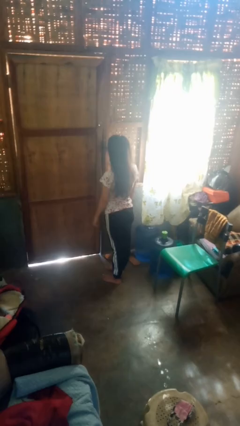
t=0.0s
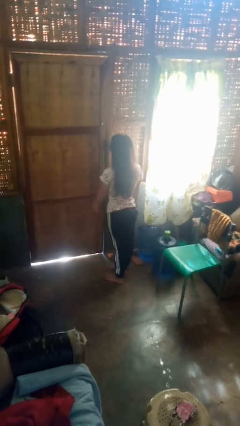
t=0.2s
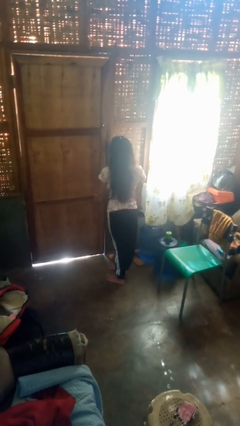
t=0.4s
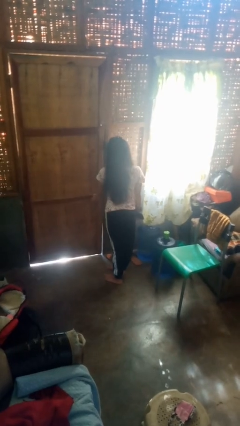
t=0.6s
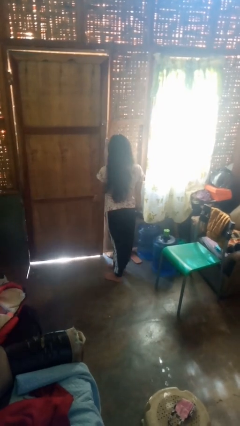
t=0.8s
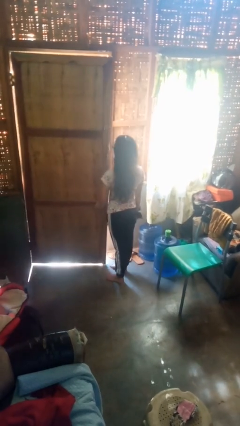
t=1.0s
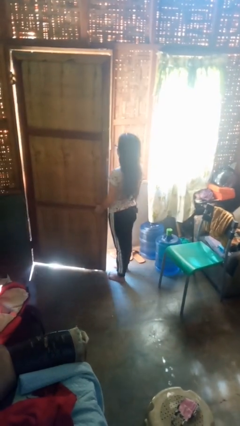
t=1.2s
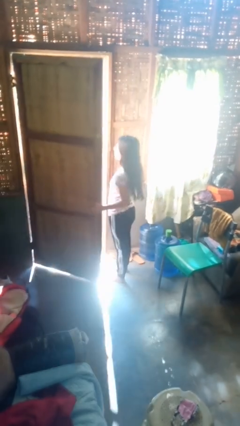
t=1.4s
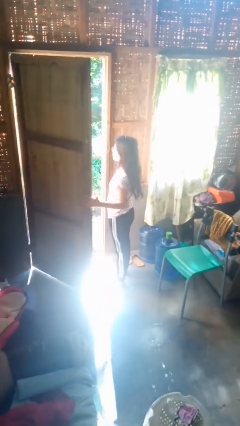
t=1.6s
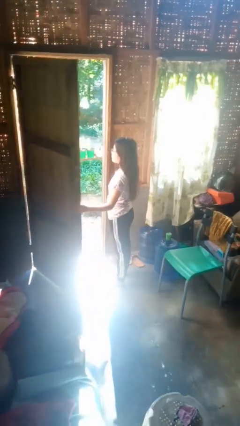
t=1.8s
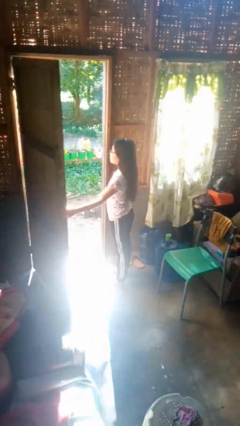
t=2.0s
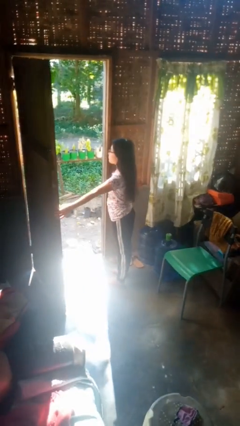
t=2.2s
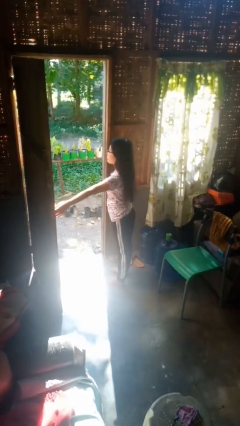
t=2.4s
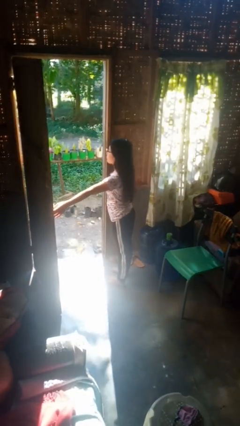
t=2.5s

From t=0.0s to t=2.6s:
person opens facility door

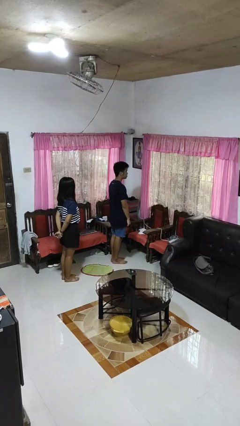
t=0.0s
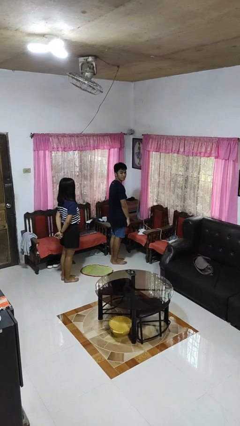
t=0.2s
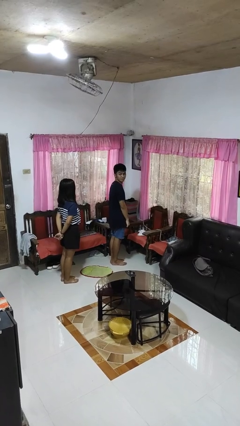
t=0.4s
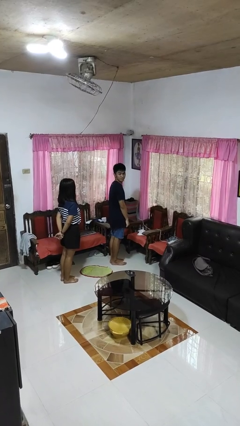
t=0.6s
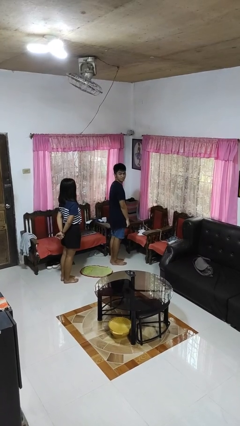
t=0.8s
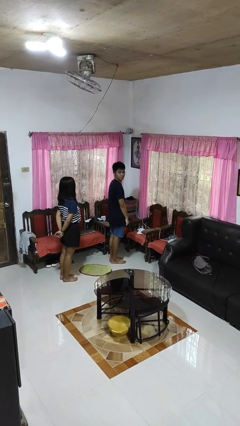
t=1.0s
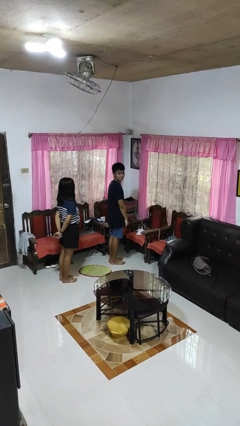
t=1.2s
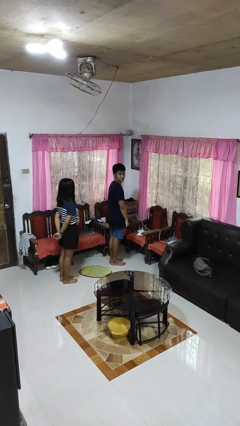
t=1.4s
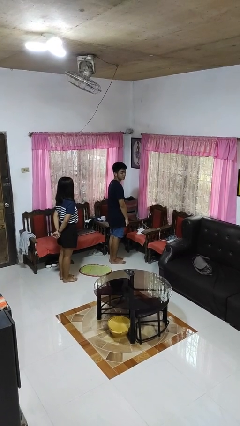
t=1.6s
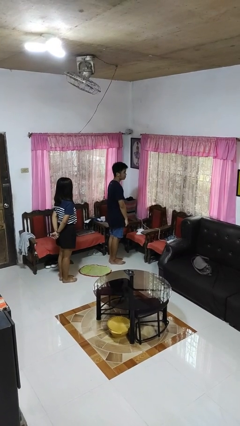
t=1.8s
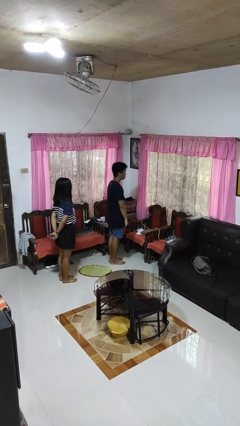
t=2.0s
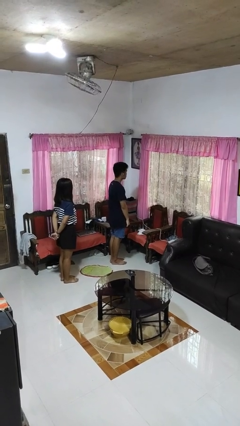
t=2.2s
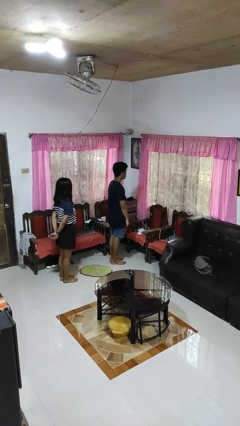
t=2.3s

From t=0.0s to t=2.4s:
person looks over shoulder

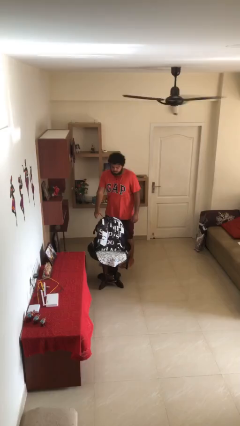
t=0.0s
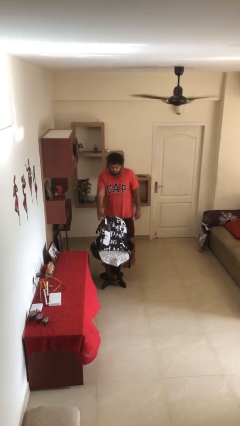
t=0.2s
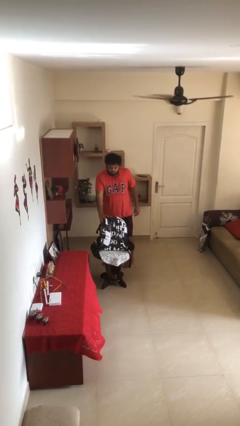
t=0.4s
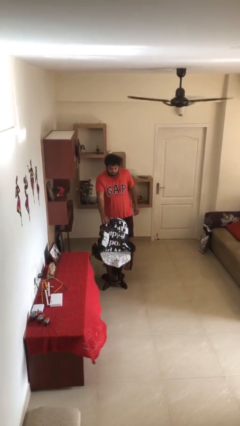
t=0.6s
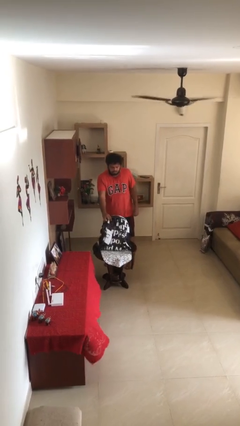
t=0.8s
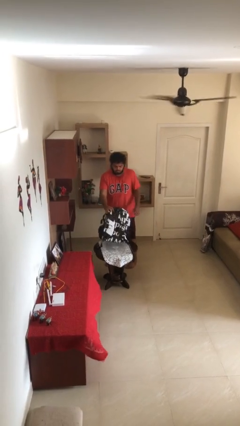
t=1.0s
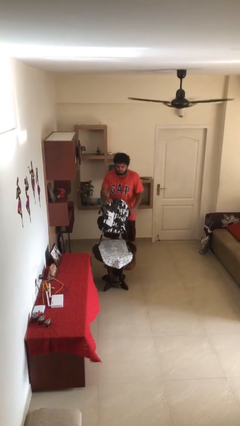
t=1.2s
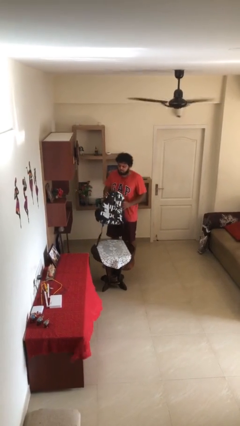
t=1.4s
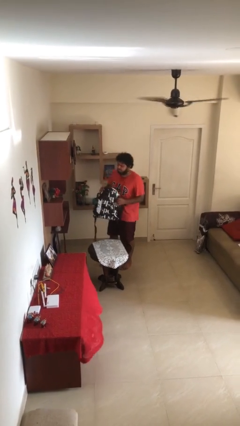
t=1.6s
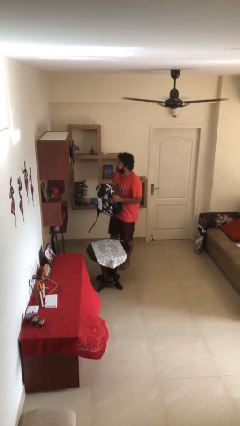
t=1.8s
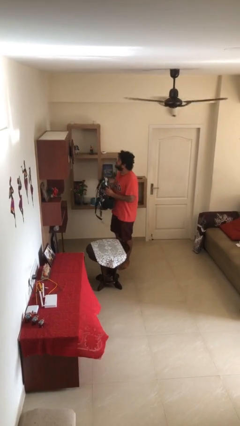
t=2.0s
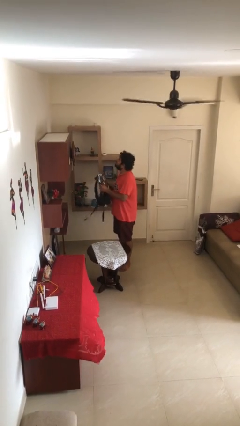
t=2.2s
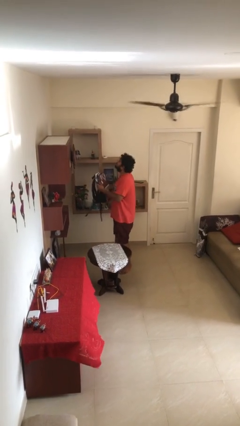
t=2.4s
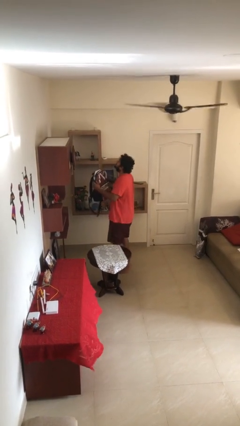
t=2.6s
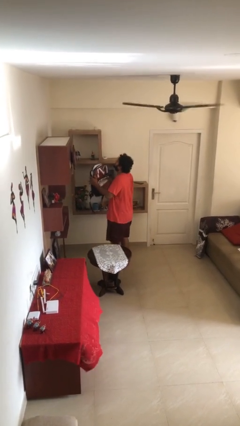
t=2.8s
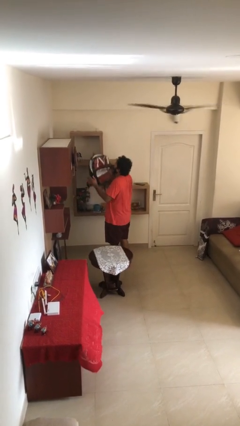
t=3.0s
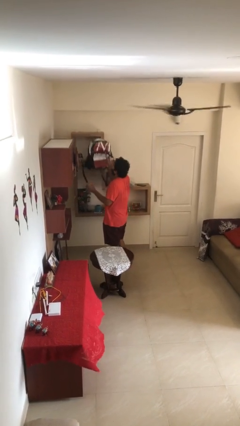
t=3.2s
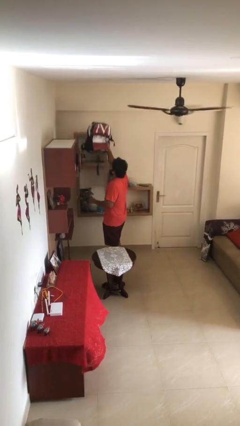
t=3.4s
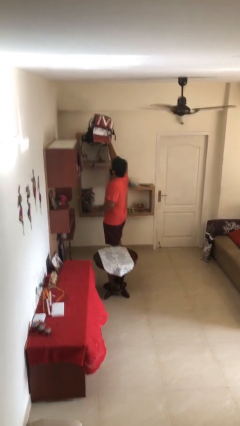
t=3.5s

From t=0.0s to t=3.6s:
person picks up object from table

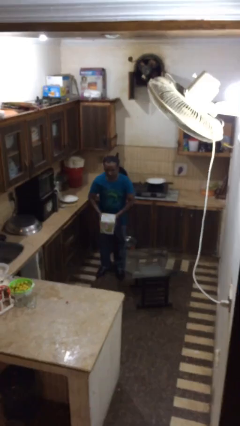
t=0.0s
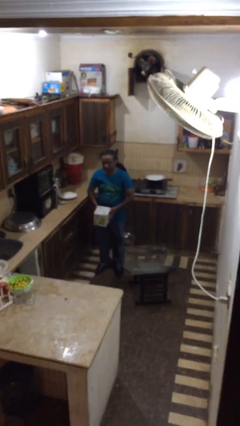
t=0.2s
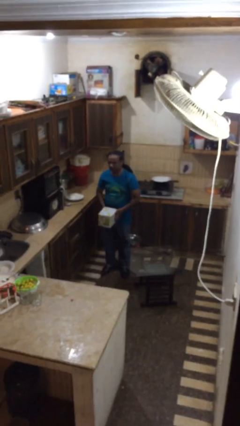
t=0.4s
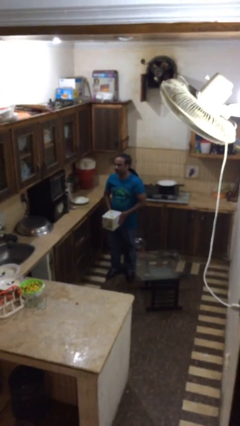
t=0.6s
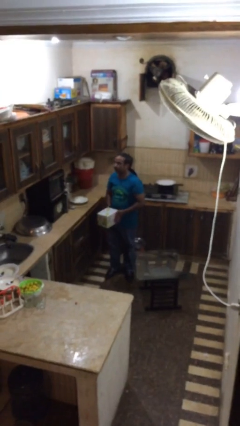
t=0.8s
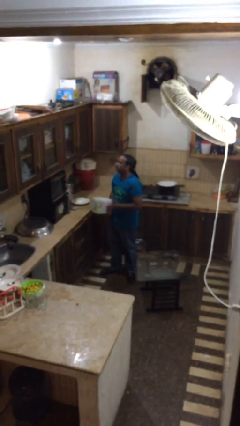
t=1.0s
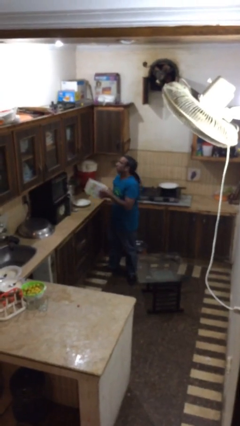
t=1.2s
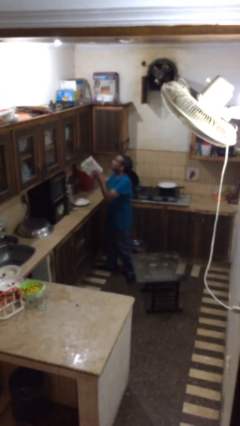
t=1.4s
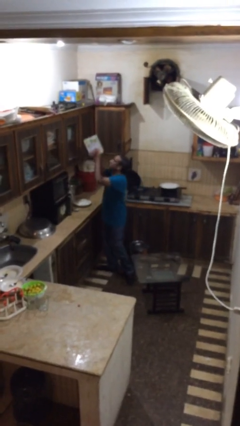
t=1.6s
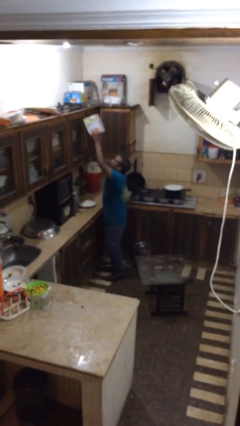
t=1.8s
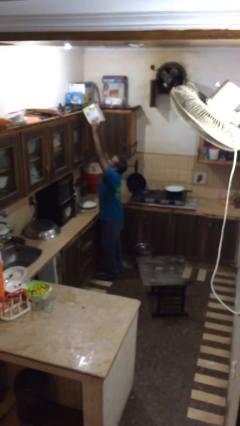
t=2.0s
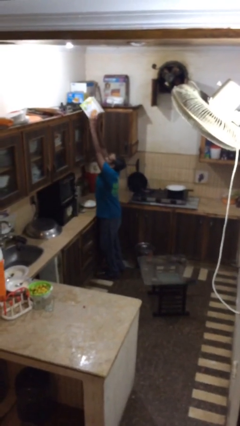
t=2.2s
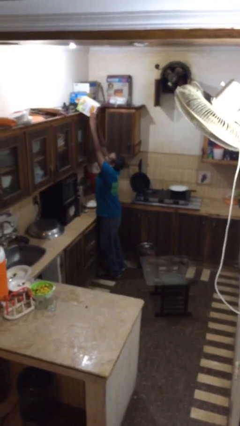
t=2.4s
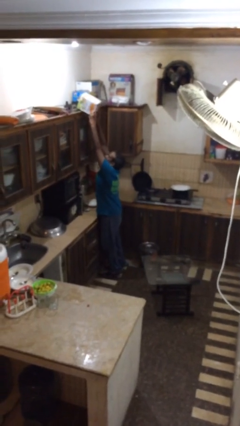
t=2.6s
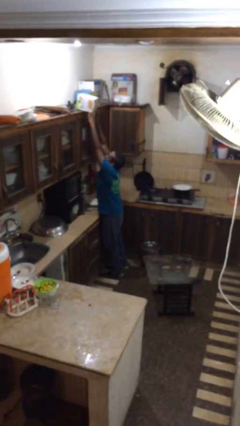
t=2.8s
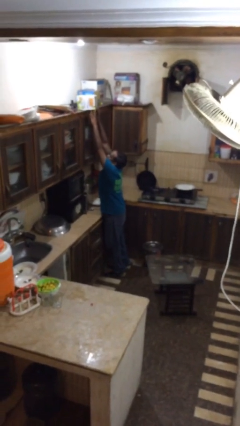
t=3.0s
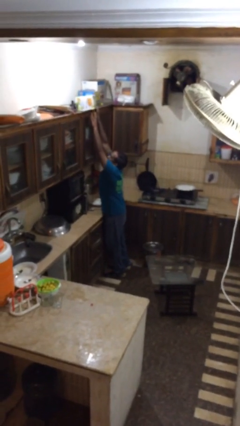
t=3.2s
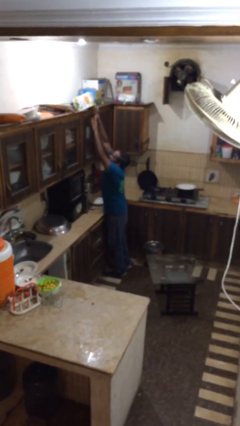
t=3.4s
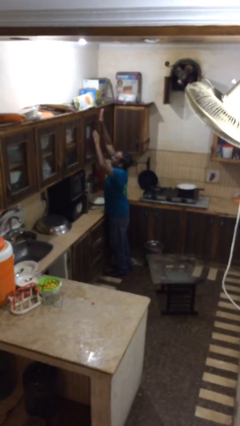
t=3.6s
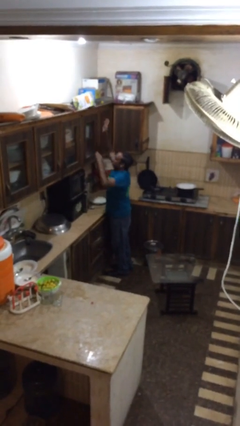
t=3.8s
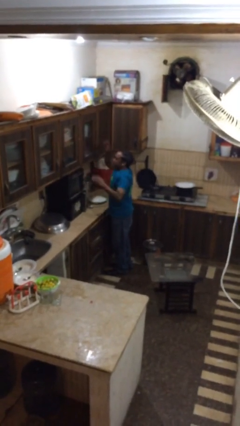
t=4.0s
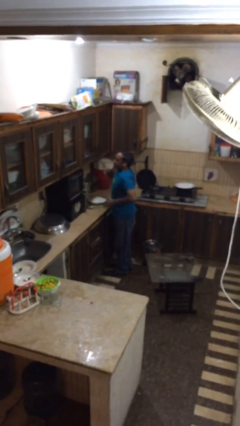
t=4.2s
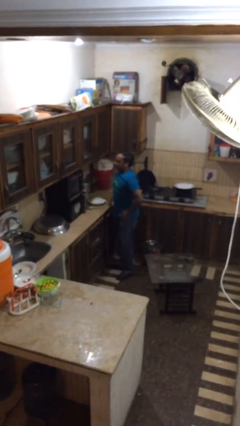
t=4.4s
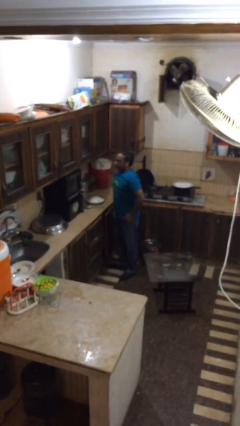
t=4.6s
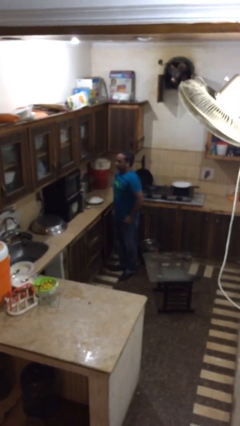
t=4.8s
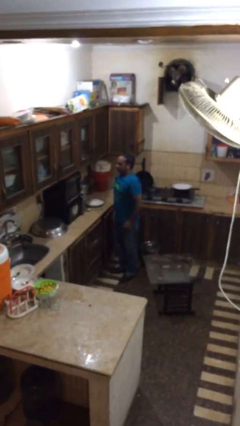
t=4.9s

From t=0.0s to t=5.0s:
person puts down object on shelf

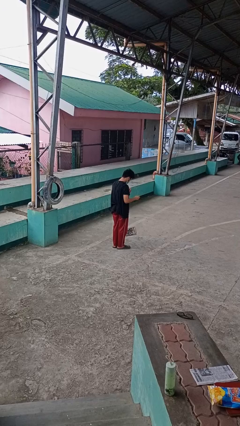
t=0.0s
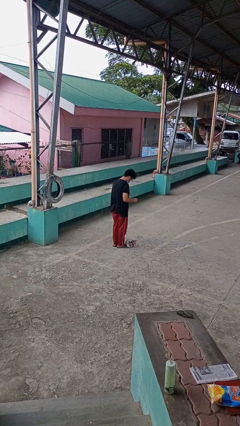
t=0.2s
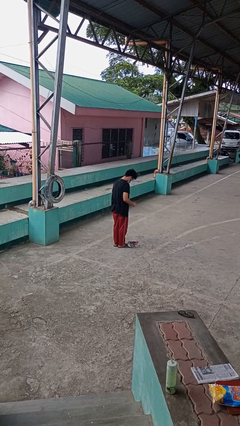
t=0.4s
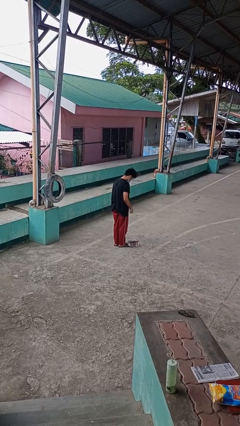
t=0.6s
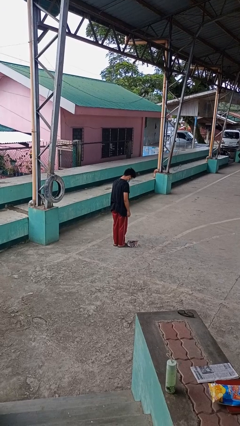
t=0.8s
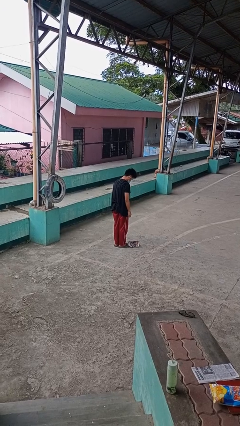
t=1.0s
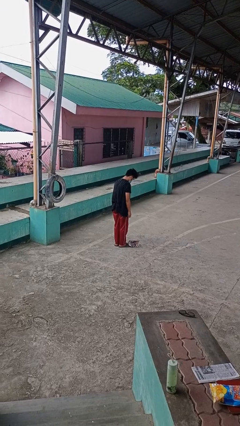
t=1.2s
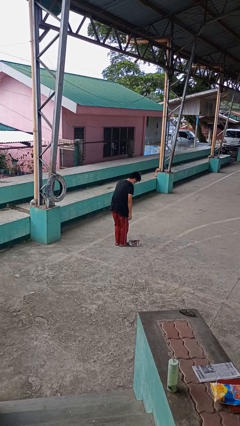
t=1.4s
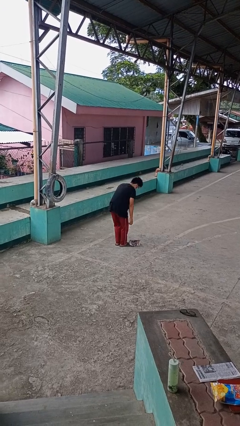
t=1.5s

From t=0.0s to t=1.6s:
person drops object

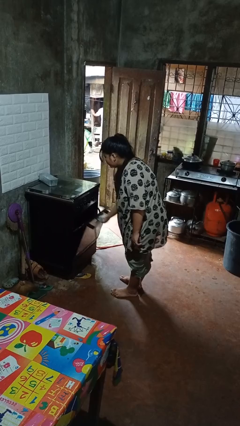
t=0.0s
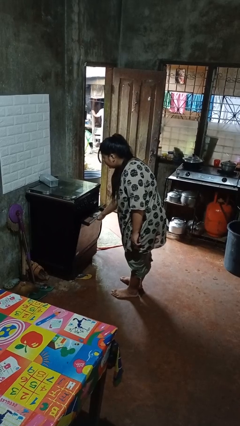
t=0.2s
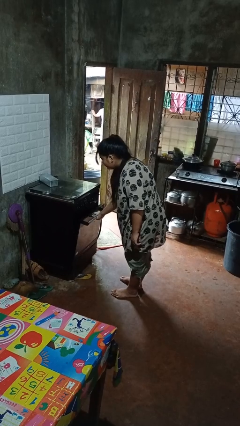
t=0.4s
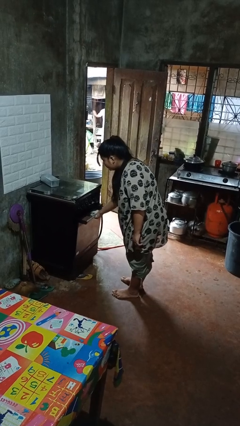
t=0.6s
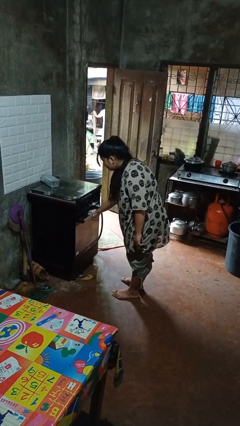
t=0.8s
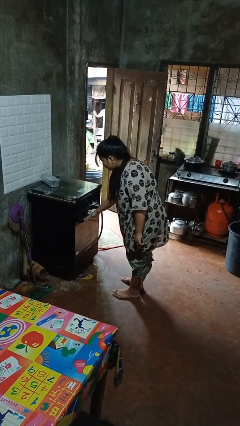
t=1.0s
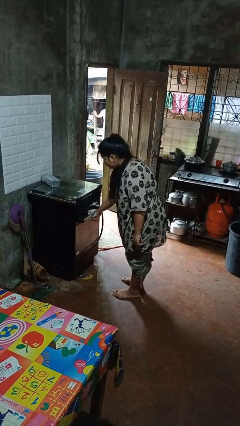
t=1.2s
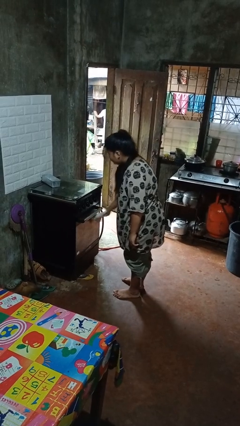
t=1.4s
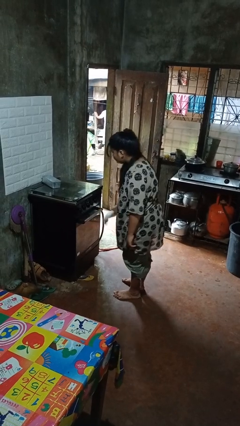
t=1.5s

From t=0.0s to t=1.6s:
person closes oven door

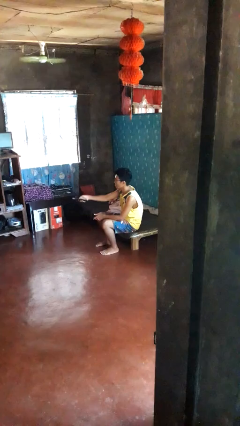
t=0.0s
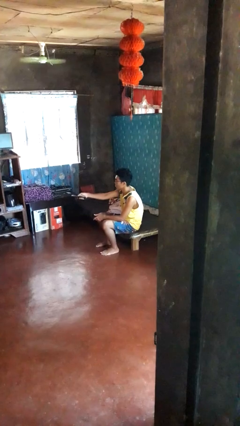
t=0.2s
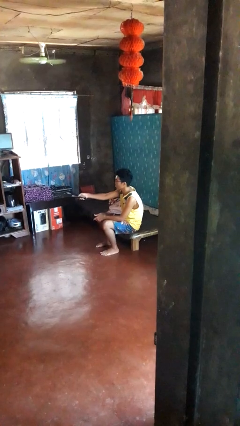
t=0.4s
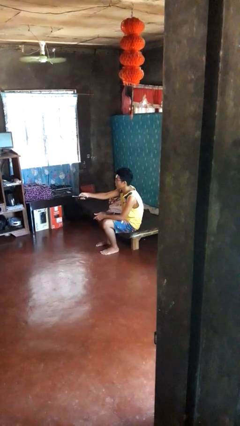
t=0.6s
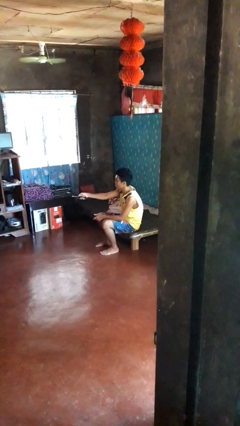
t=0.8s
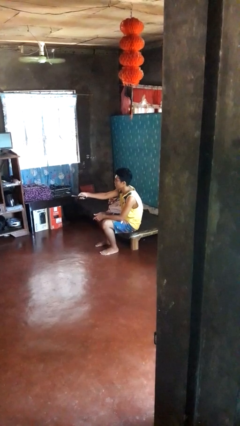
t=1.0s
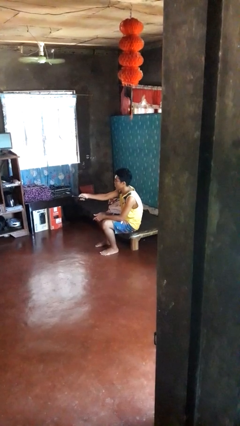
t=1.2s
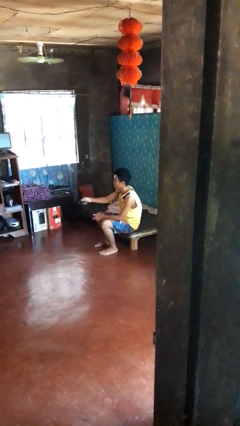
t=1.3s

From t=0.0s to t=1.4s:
person uses television remote
